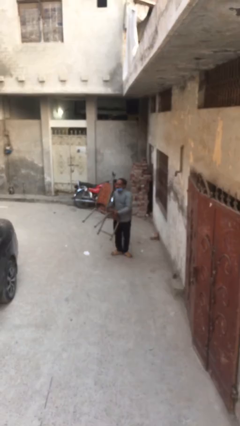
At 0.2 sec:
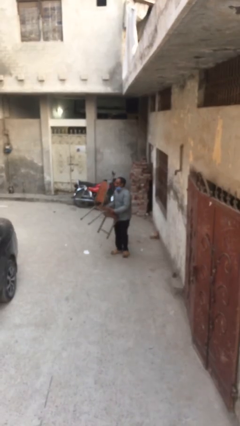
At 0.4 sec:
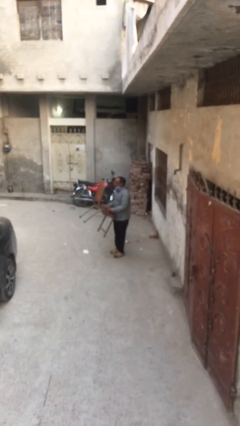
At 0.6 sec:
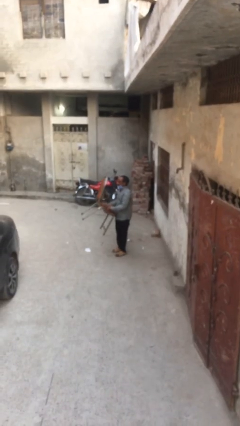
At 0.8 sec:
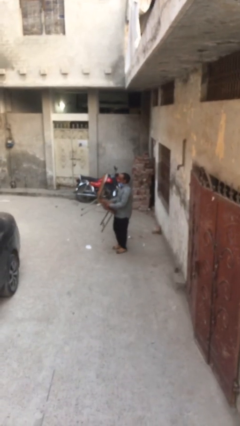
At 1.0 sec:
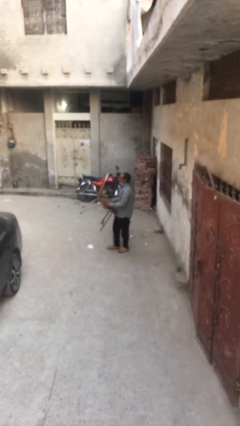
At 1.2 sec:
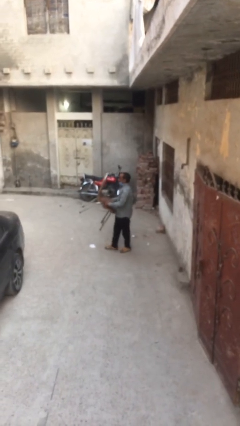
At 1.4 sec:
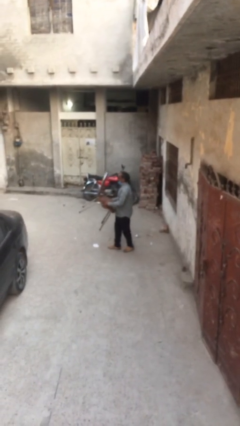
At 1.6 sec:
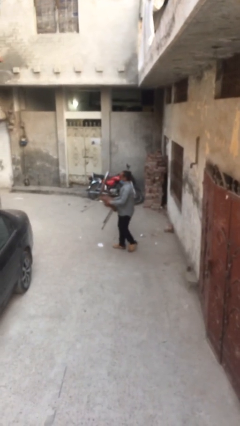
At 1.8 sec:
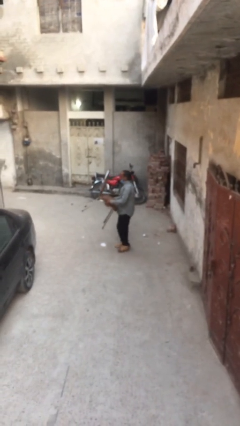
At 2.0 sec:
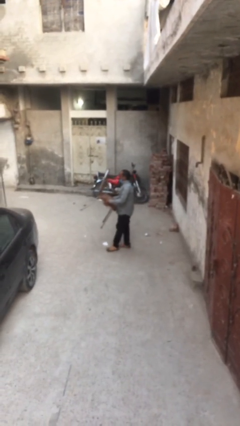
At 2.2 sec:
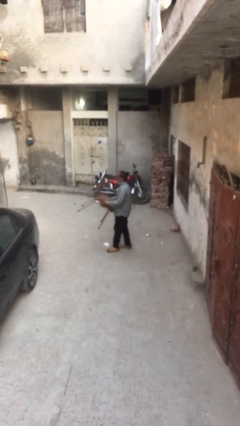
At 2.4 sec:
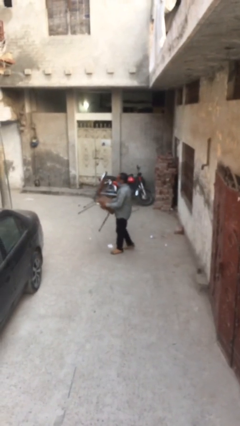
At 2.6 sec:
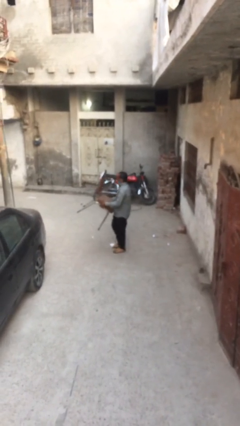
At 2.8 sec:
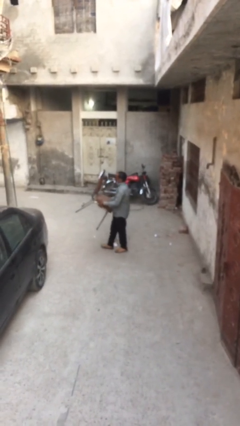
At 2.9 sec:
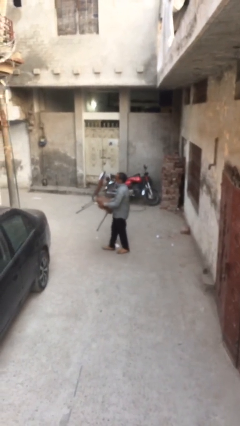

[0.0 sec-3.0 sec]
person carries heavy object

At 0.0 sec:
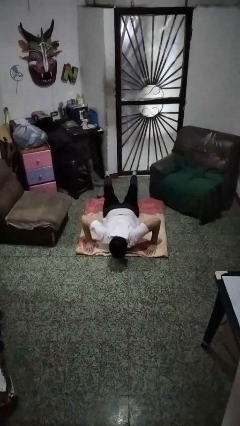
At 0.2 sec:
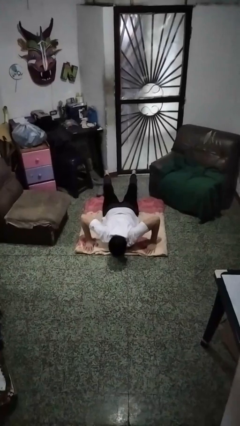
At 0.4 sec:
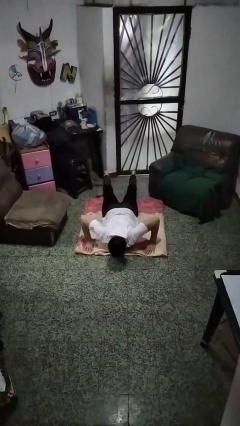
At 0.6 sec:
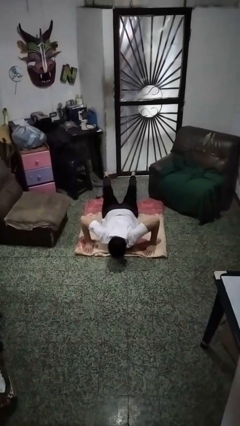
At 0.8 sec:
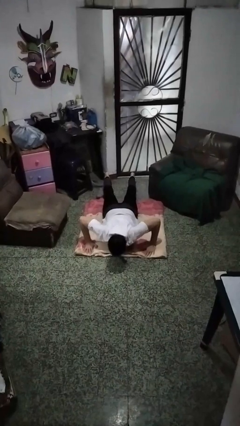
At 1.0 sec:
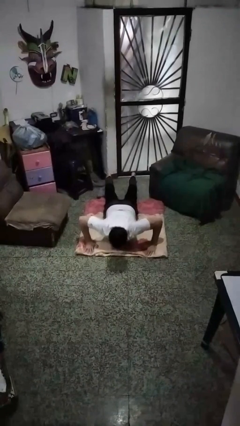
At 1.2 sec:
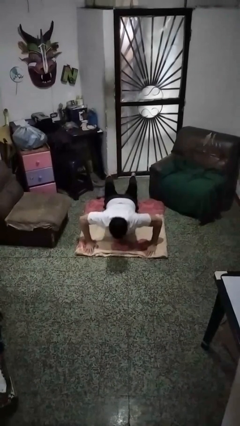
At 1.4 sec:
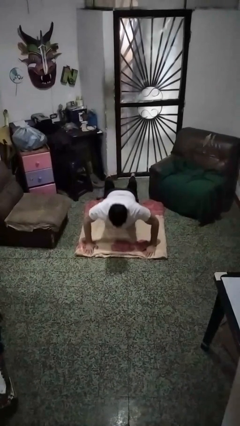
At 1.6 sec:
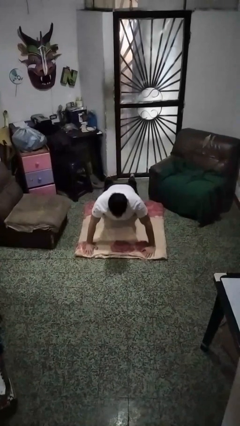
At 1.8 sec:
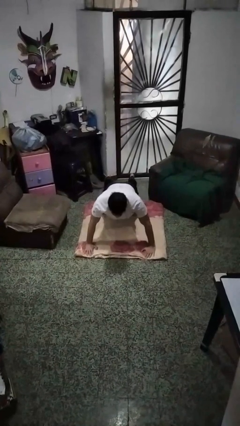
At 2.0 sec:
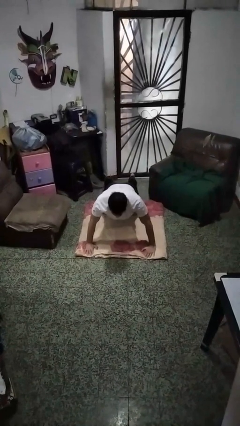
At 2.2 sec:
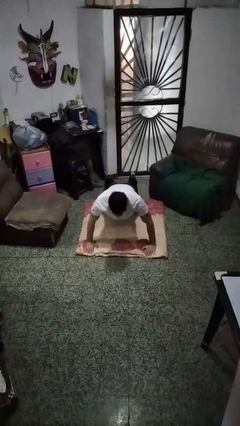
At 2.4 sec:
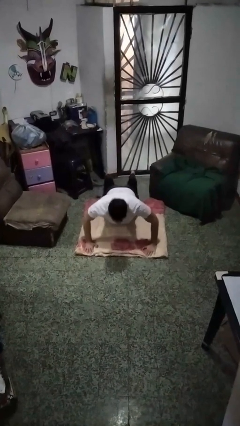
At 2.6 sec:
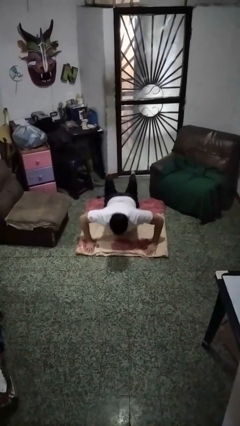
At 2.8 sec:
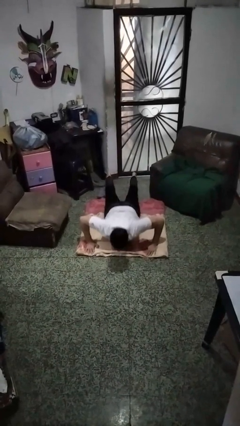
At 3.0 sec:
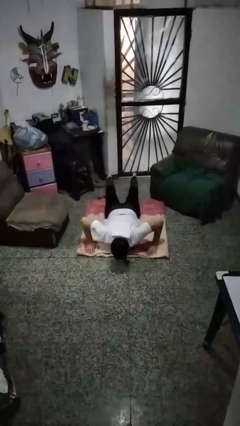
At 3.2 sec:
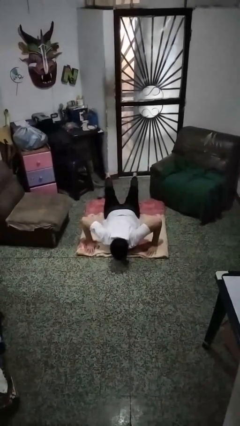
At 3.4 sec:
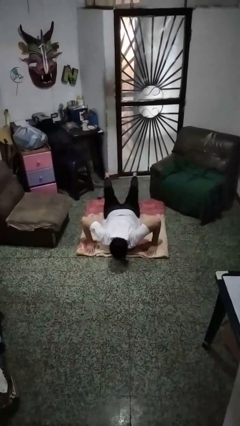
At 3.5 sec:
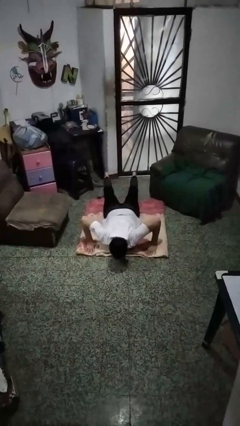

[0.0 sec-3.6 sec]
person exercises with pushup

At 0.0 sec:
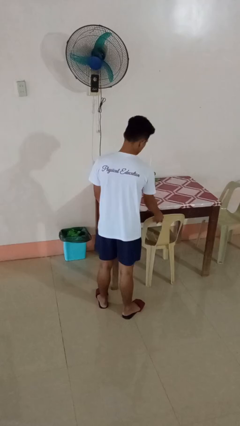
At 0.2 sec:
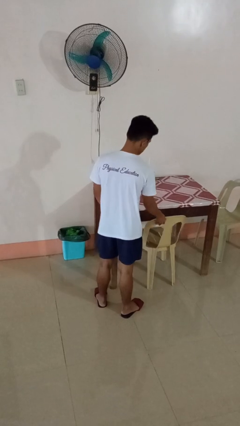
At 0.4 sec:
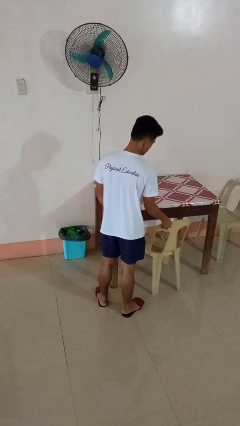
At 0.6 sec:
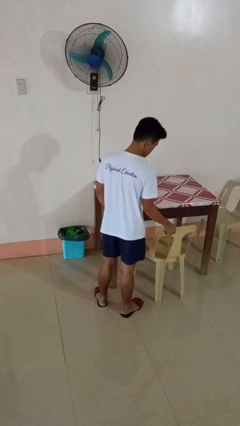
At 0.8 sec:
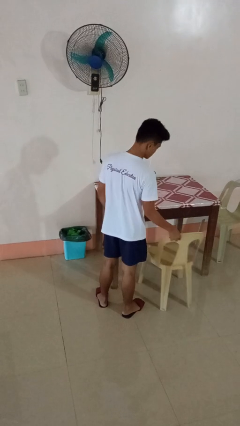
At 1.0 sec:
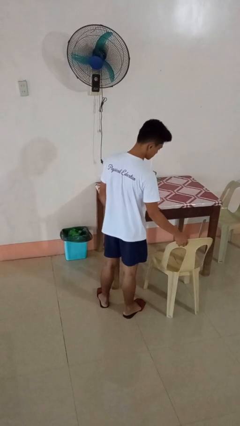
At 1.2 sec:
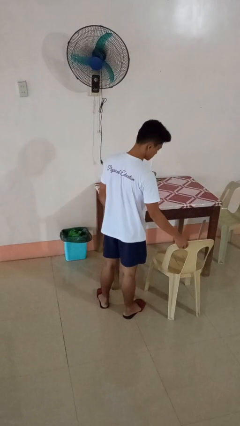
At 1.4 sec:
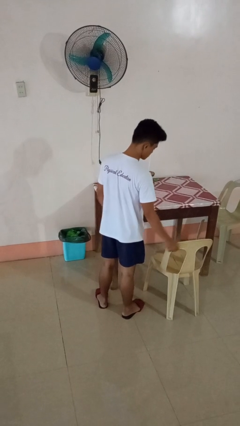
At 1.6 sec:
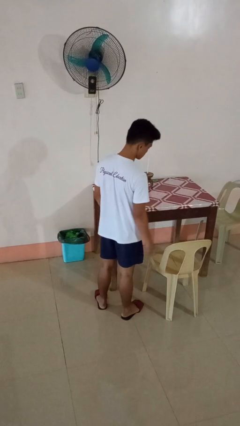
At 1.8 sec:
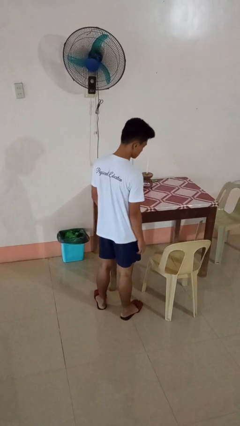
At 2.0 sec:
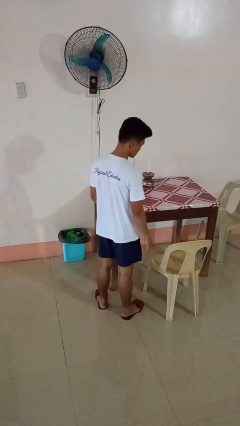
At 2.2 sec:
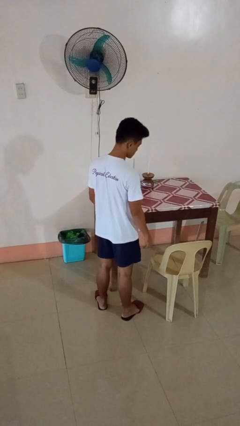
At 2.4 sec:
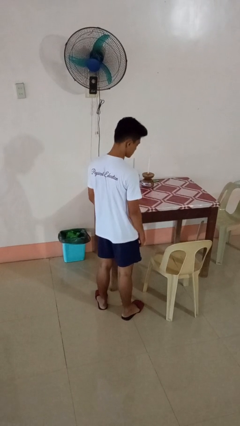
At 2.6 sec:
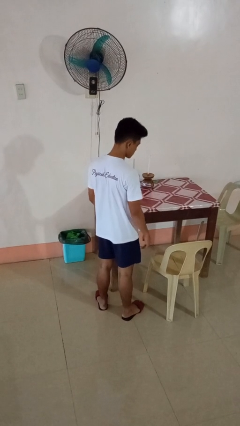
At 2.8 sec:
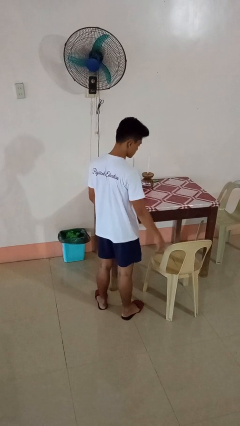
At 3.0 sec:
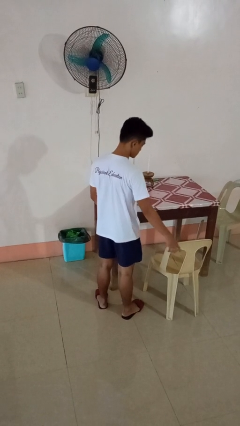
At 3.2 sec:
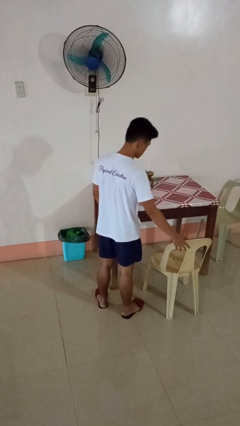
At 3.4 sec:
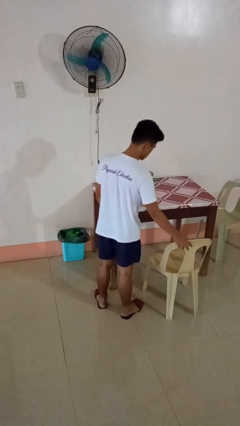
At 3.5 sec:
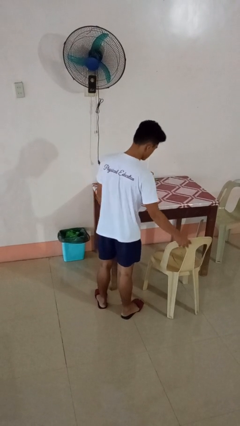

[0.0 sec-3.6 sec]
person pulls out chair

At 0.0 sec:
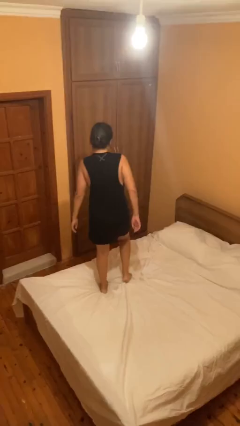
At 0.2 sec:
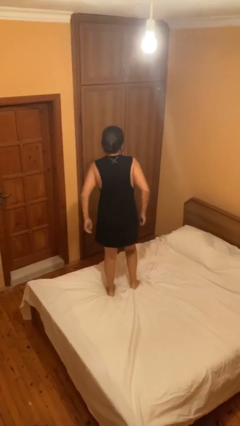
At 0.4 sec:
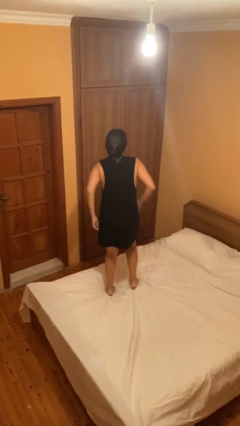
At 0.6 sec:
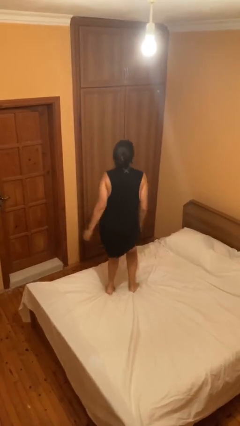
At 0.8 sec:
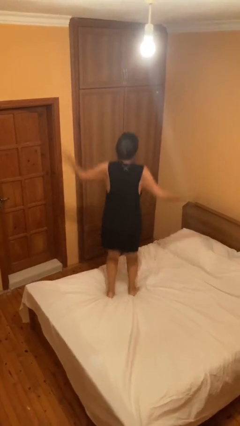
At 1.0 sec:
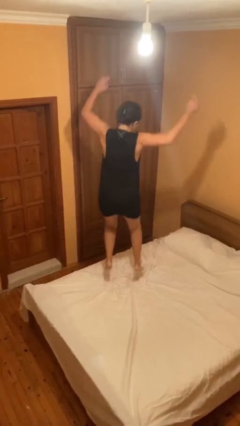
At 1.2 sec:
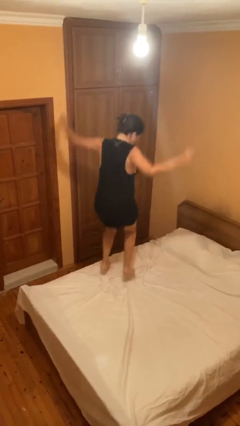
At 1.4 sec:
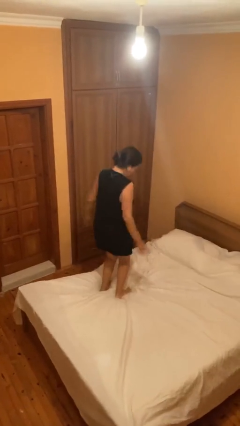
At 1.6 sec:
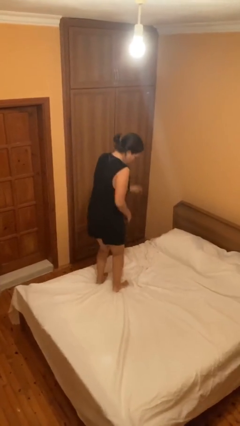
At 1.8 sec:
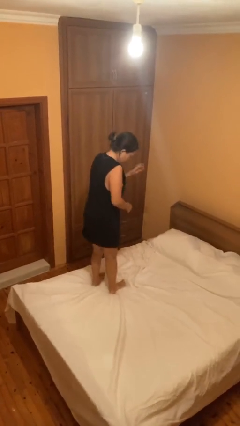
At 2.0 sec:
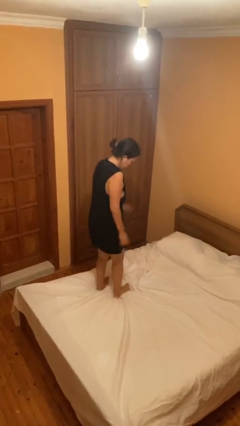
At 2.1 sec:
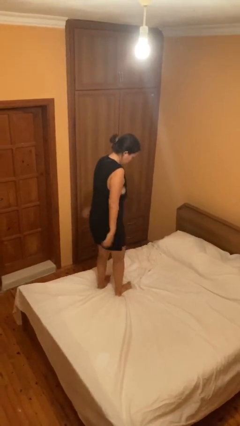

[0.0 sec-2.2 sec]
person jumps on bed

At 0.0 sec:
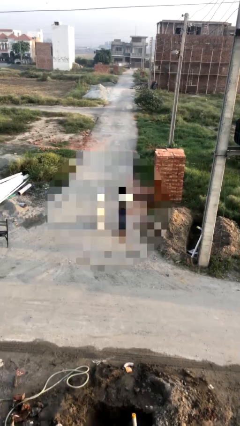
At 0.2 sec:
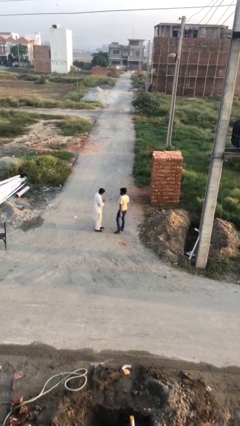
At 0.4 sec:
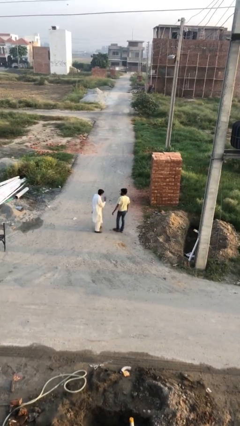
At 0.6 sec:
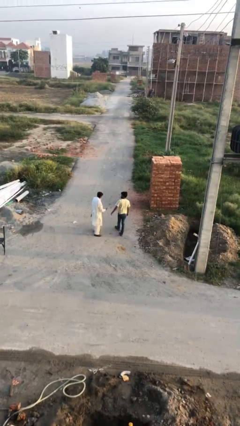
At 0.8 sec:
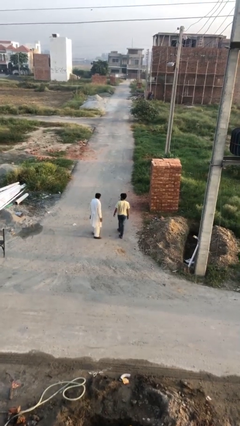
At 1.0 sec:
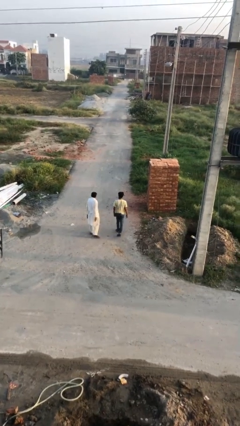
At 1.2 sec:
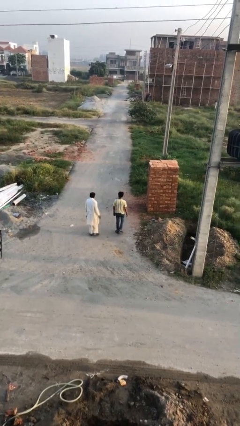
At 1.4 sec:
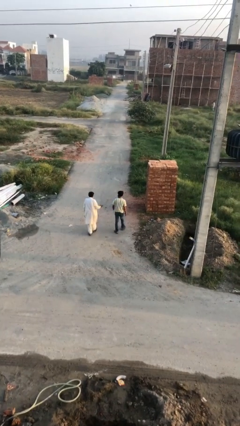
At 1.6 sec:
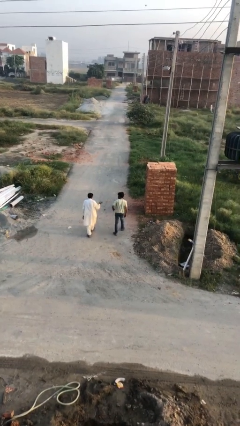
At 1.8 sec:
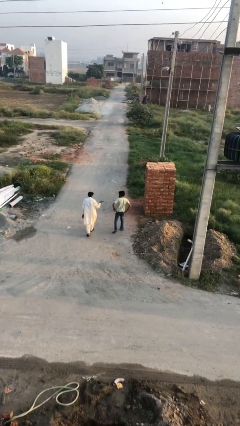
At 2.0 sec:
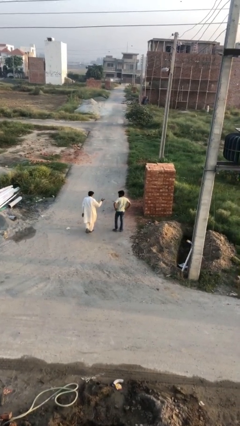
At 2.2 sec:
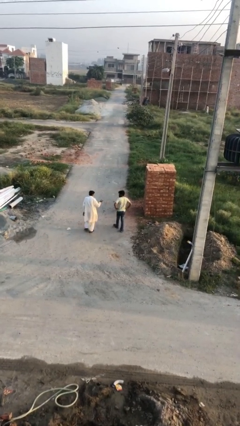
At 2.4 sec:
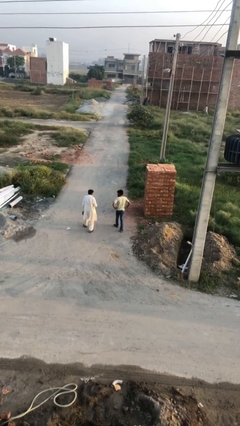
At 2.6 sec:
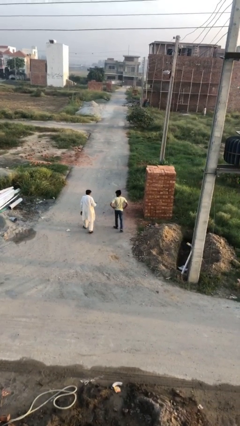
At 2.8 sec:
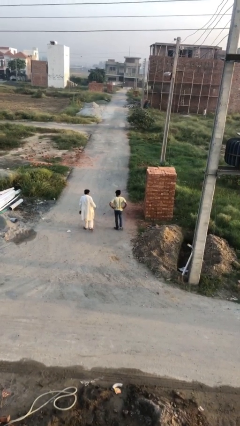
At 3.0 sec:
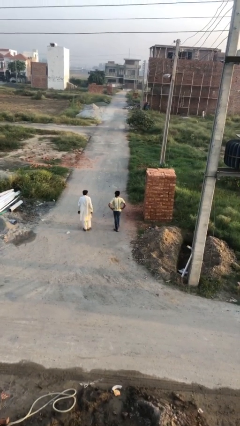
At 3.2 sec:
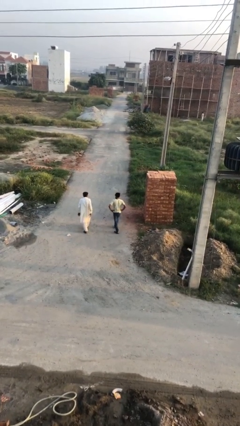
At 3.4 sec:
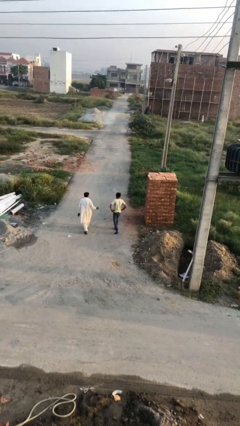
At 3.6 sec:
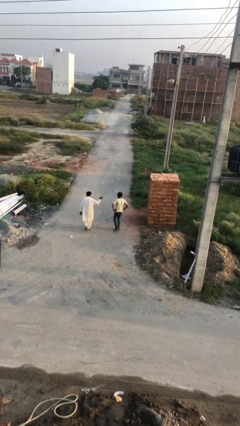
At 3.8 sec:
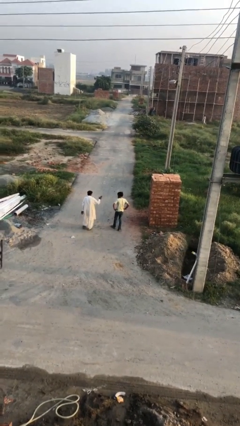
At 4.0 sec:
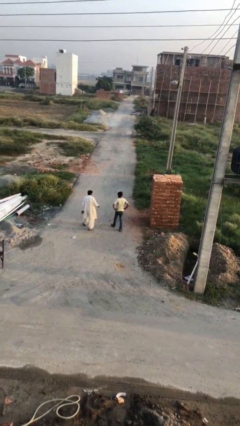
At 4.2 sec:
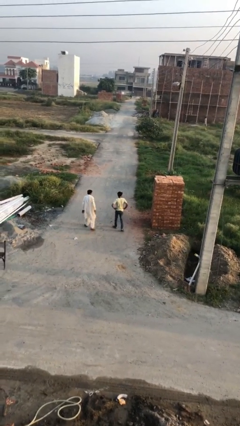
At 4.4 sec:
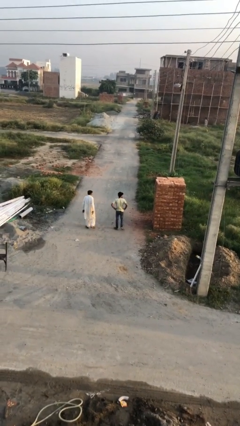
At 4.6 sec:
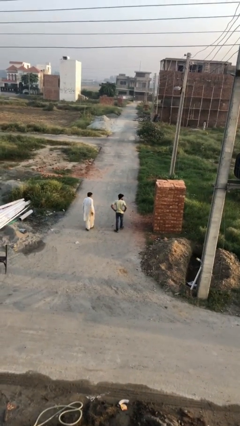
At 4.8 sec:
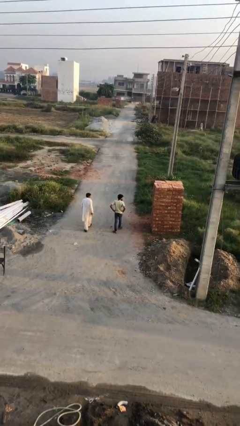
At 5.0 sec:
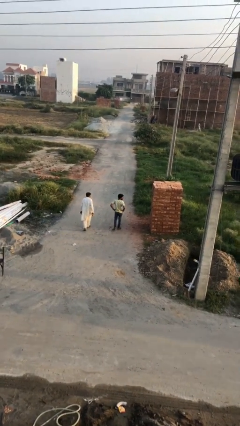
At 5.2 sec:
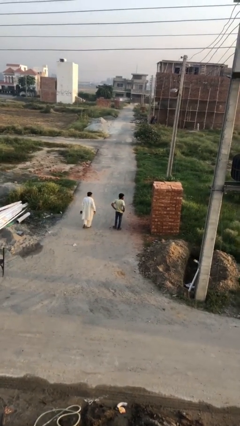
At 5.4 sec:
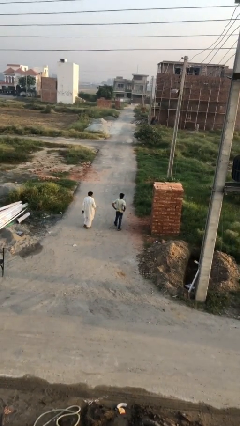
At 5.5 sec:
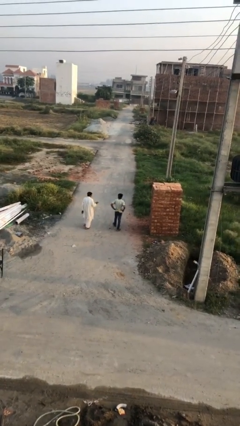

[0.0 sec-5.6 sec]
person talks to person
